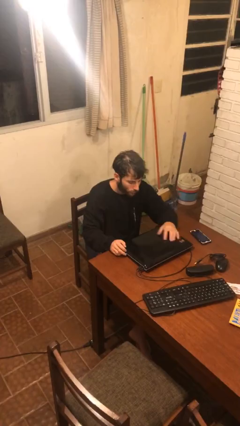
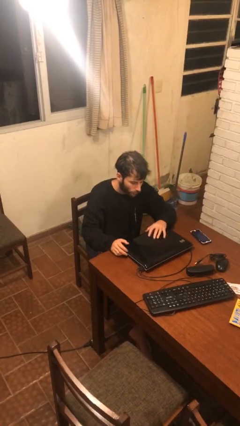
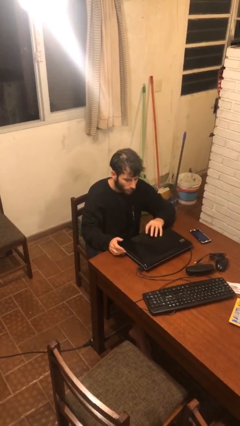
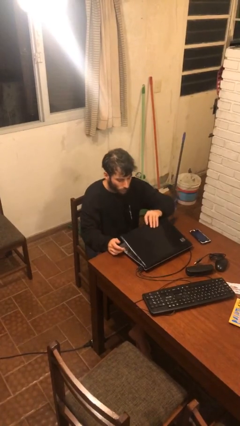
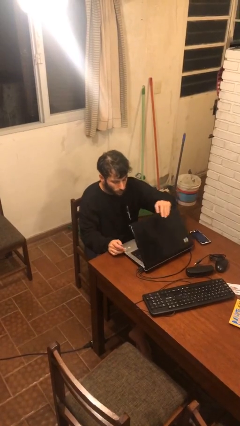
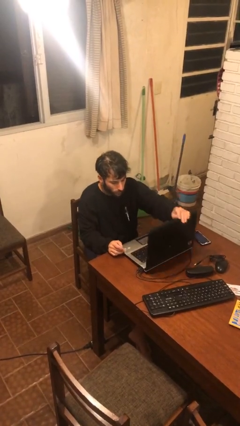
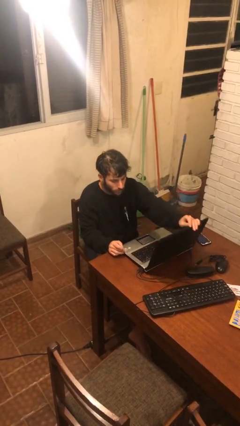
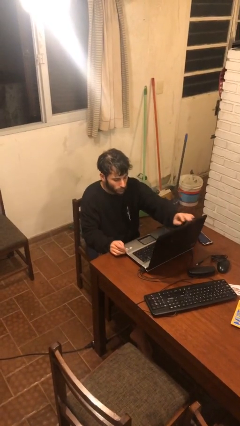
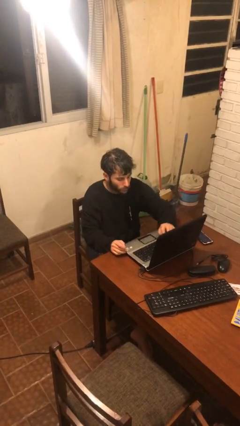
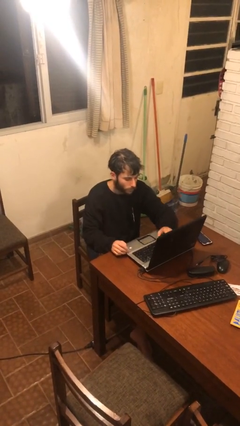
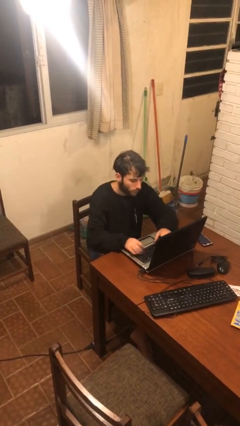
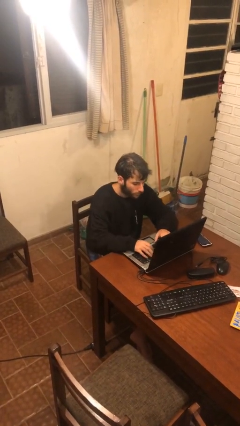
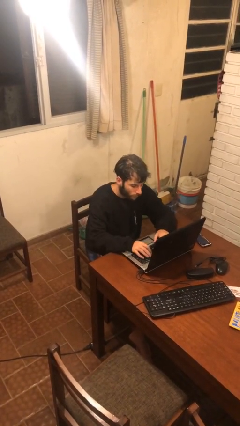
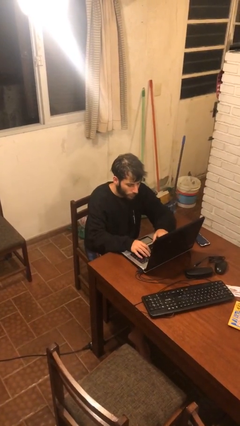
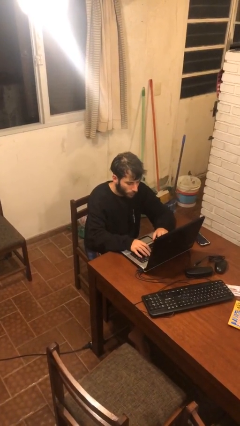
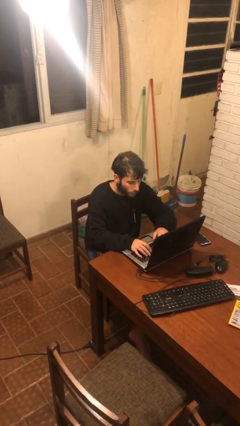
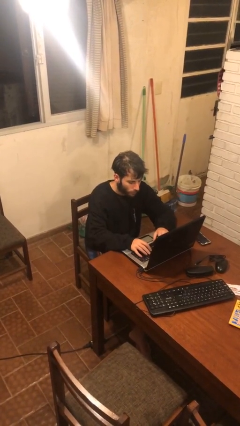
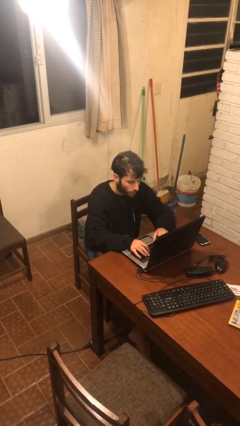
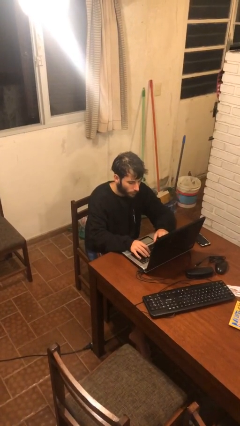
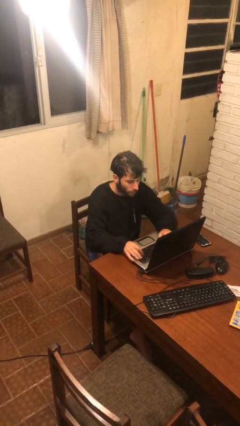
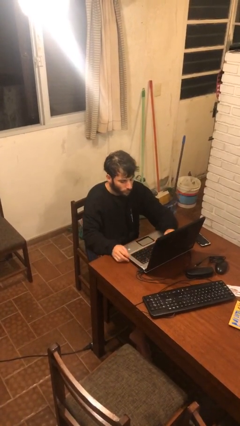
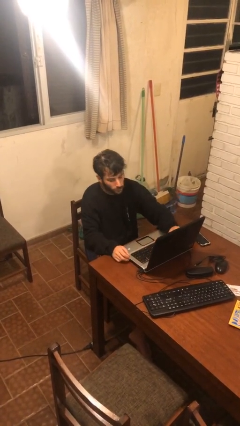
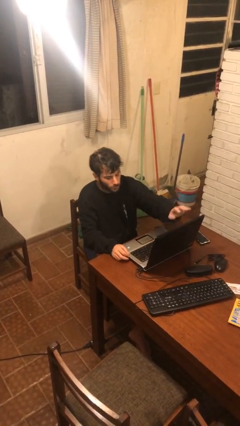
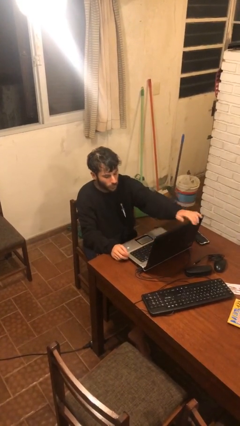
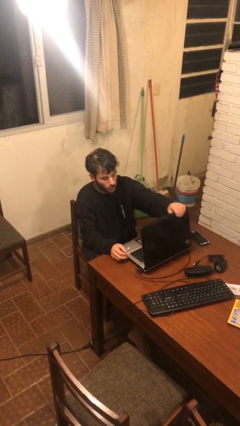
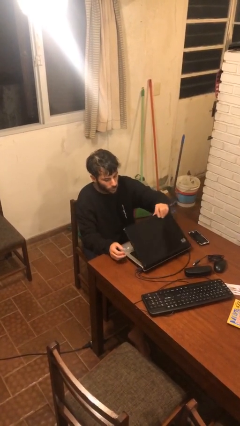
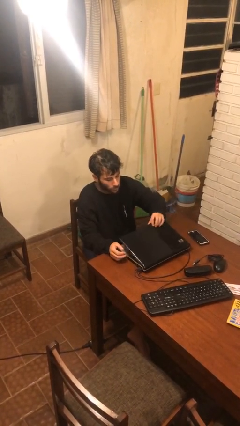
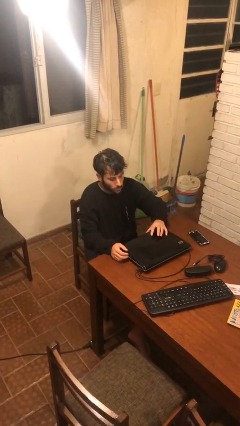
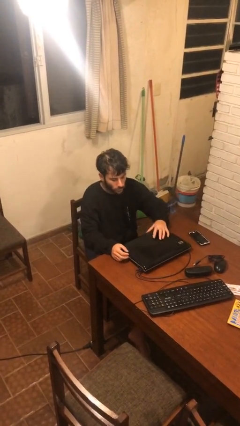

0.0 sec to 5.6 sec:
person interacts with laptop

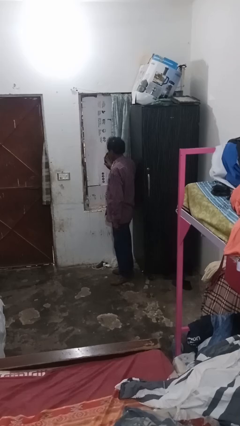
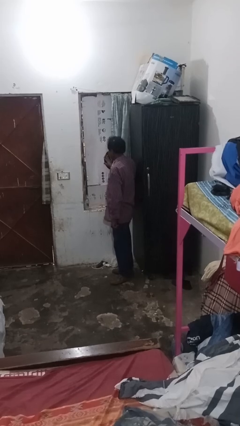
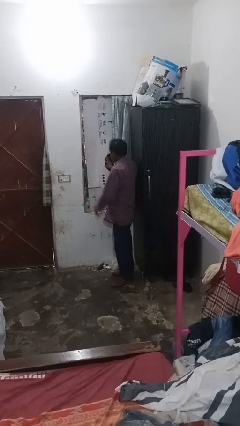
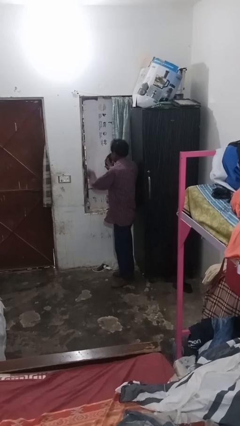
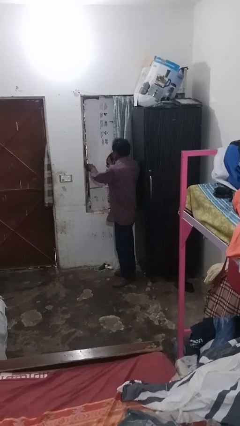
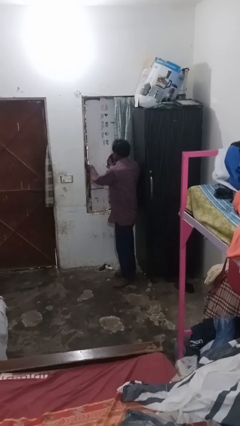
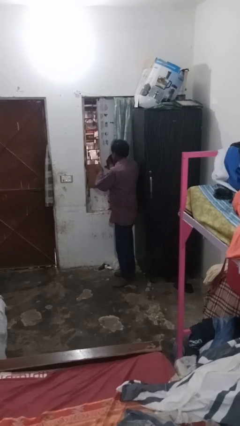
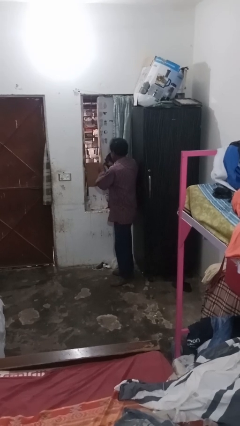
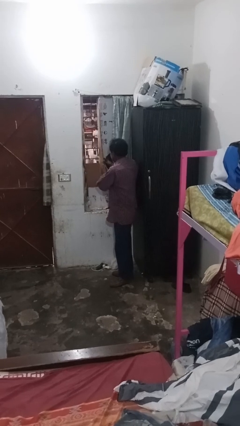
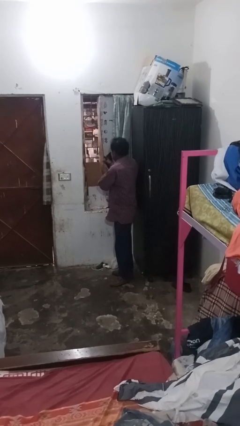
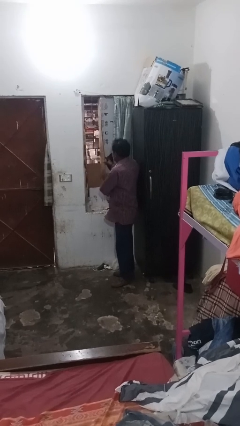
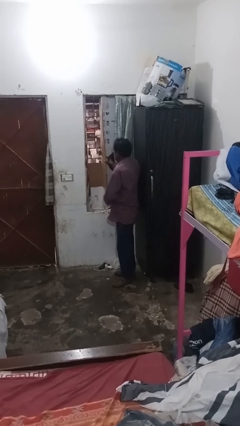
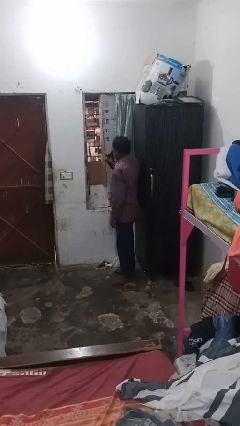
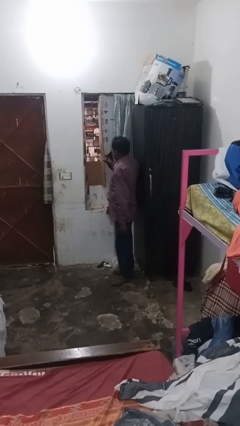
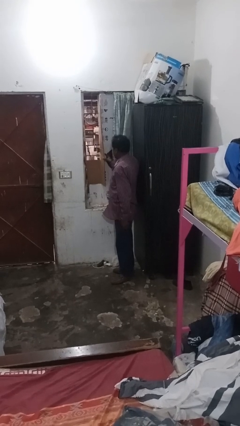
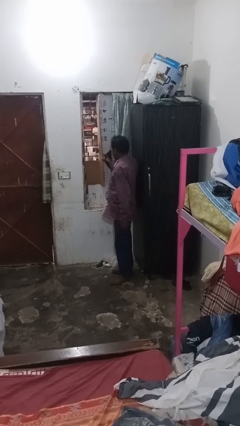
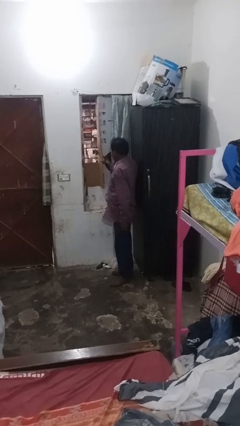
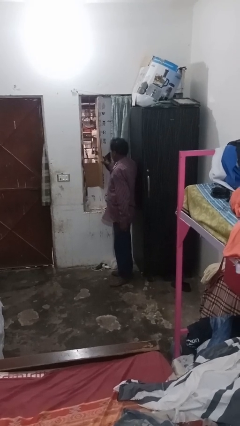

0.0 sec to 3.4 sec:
person opens home window

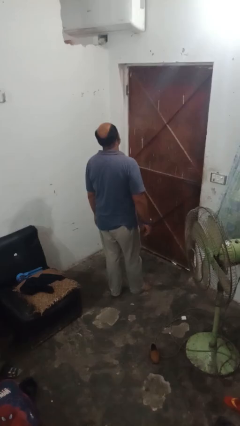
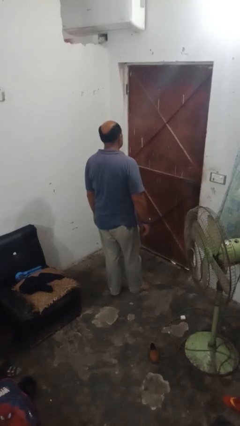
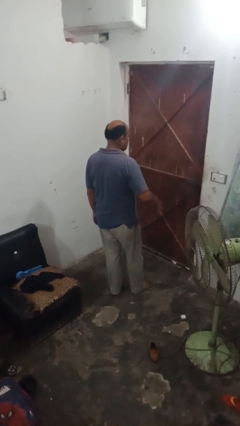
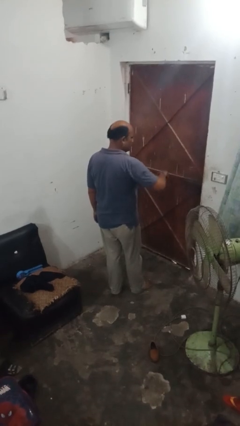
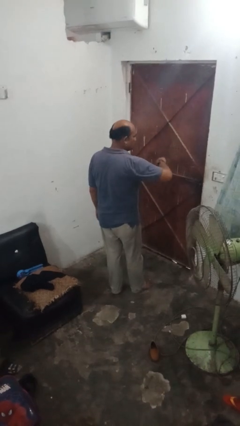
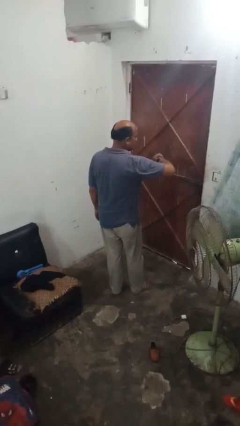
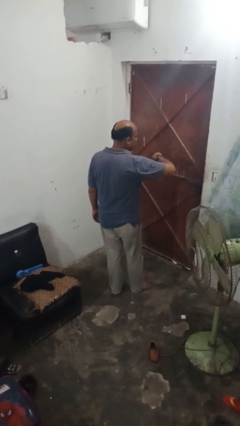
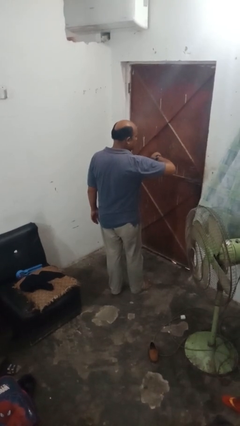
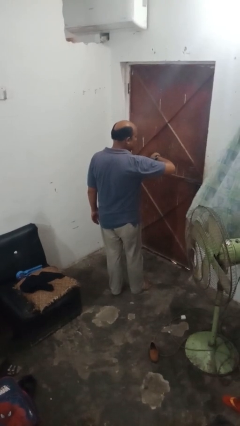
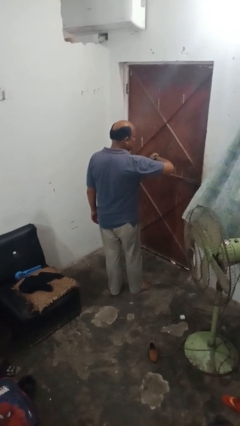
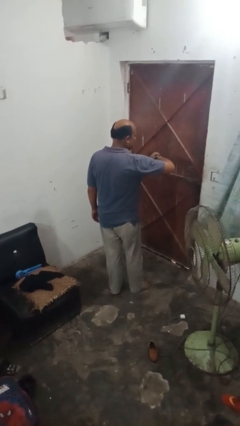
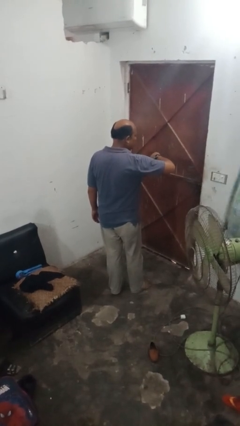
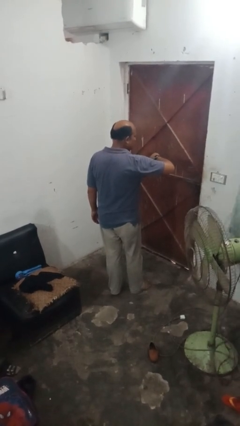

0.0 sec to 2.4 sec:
person puts on wristwatch

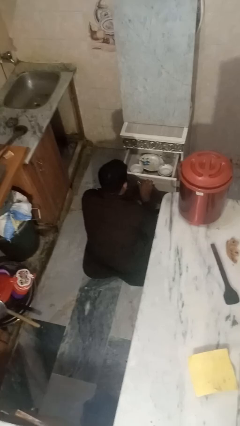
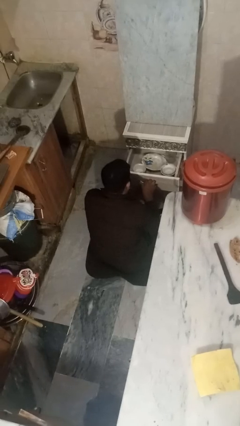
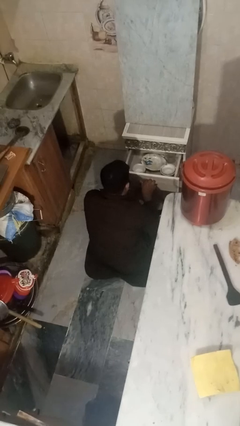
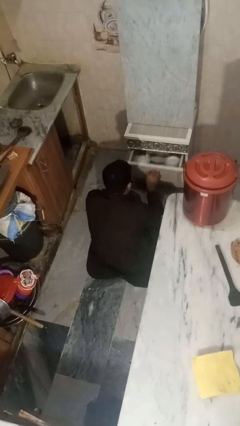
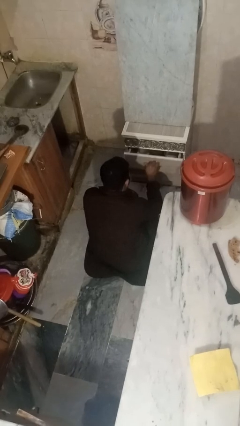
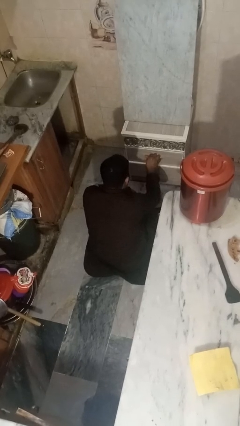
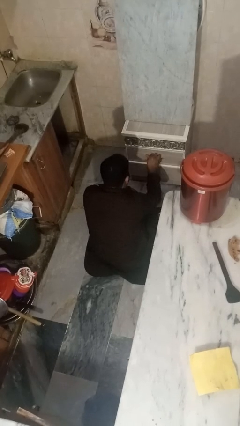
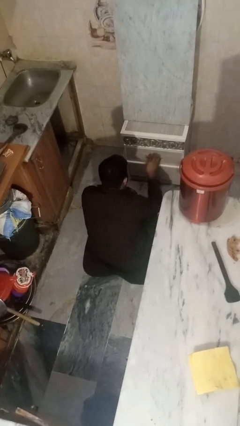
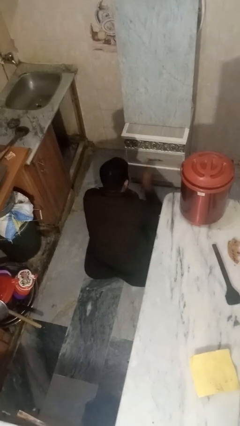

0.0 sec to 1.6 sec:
person closes kitchen drawer

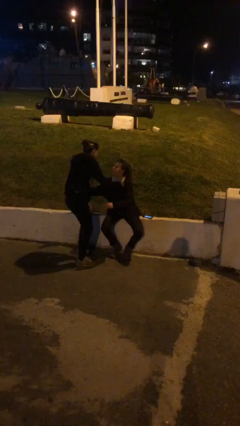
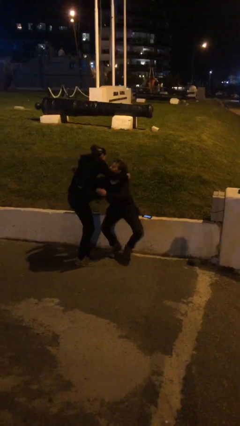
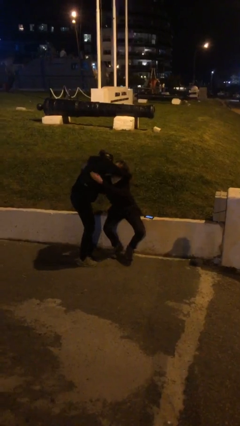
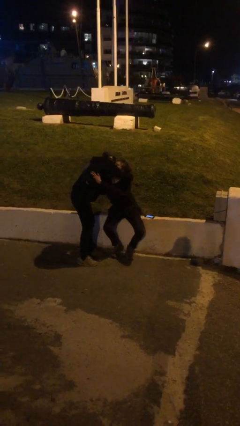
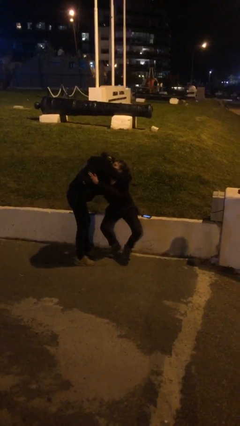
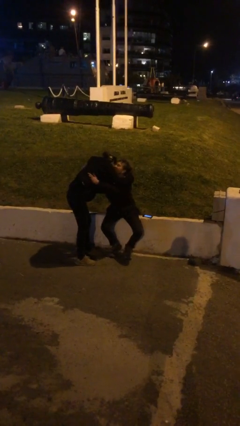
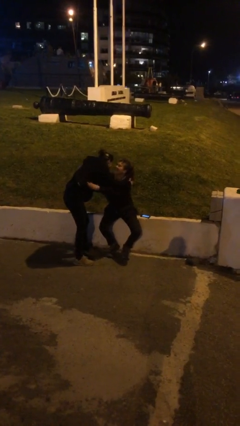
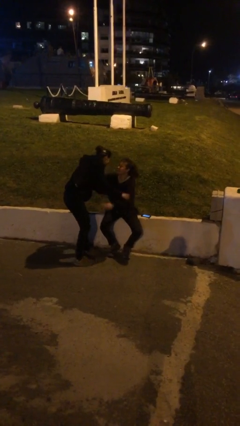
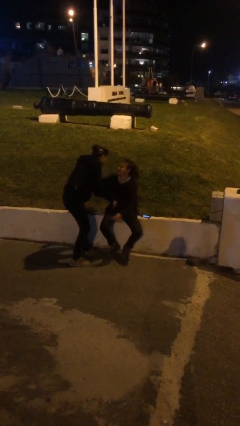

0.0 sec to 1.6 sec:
person embraces person

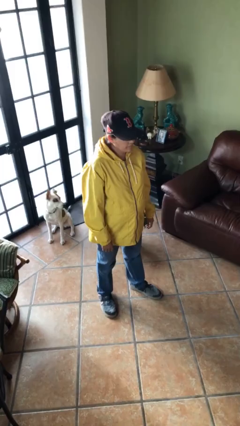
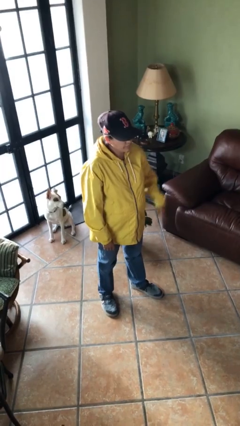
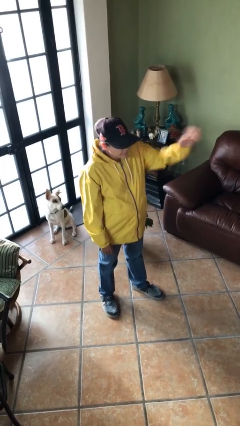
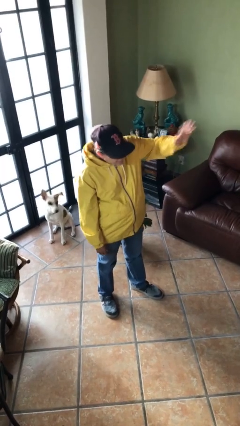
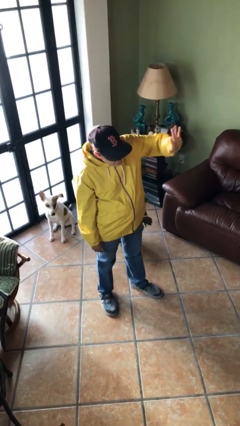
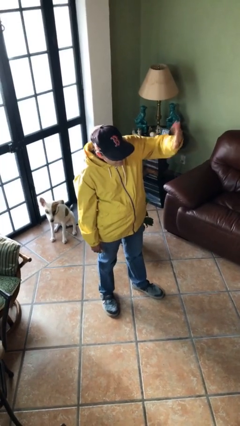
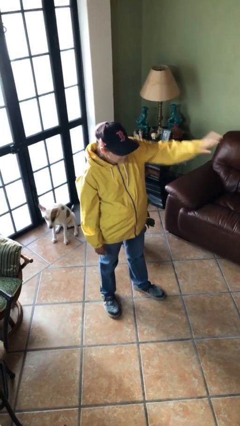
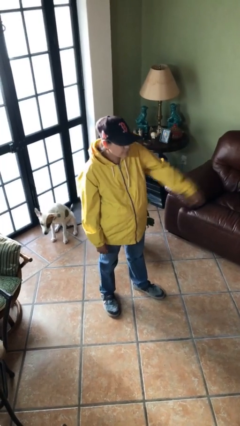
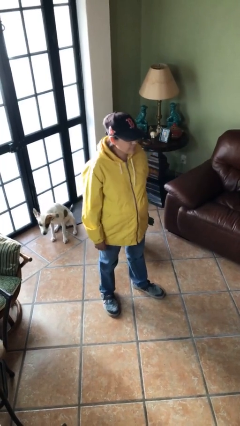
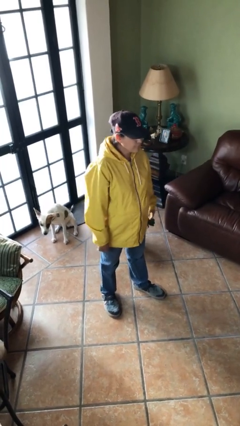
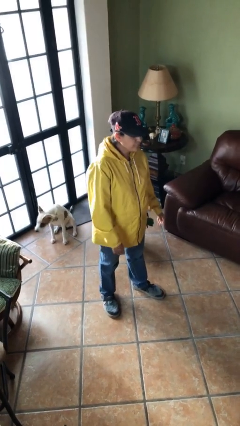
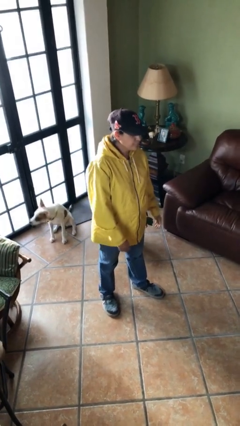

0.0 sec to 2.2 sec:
person waves at person

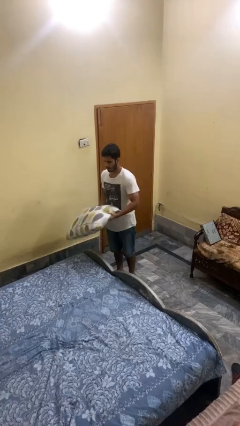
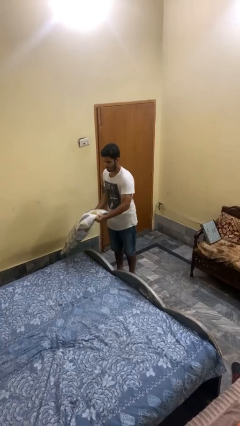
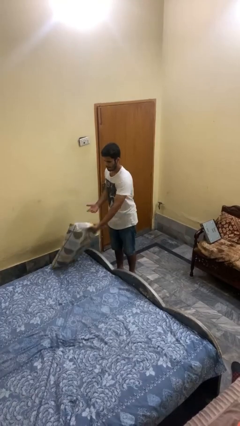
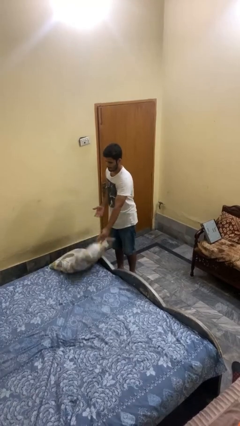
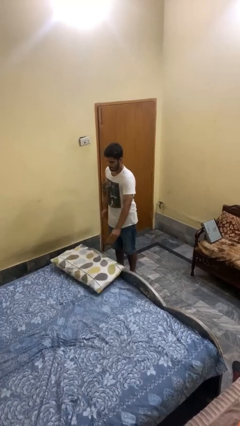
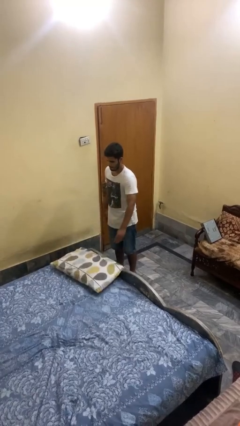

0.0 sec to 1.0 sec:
person puts down object on bed
